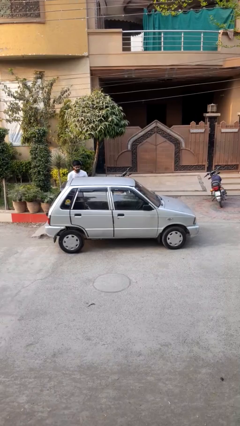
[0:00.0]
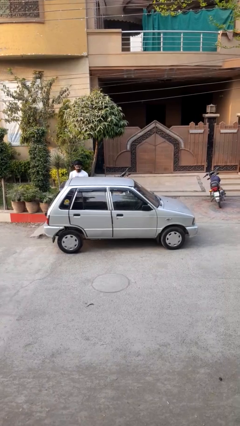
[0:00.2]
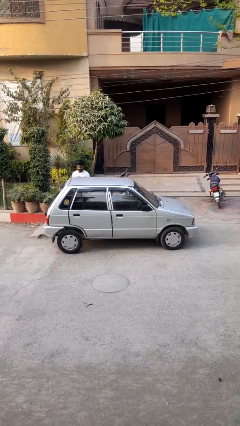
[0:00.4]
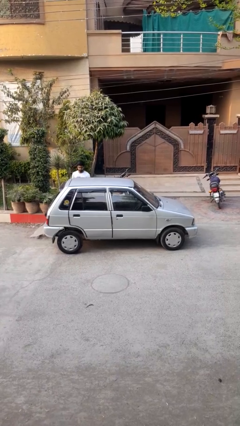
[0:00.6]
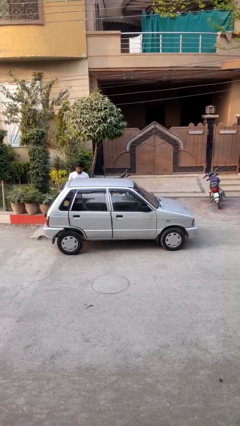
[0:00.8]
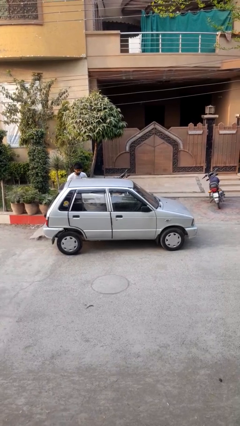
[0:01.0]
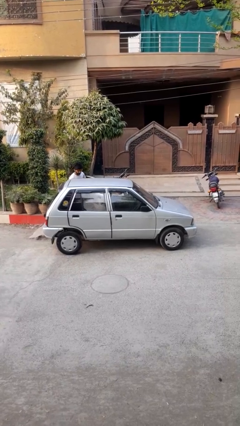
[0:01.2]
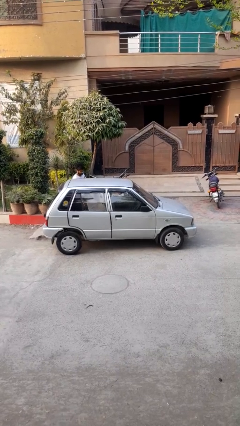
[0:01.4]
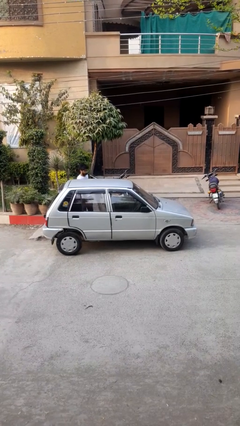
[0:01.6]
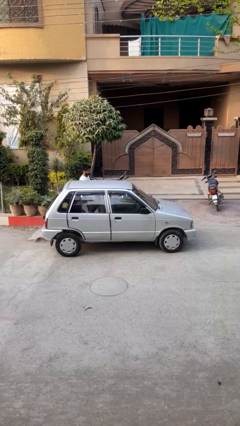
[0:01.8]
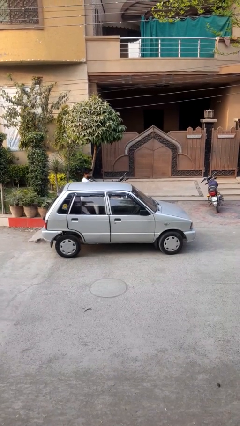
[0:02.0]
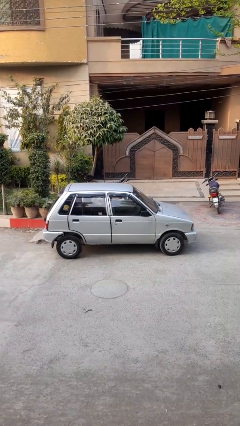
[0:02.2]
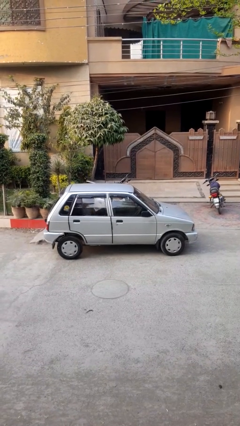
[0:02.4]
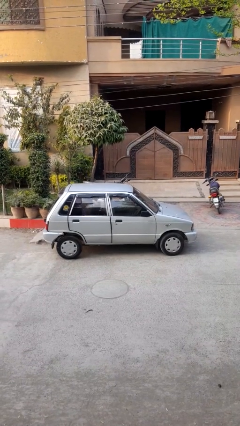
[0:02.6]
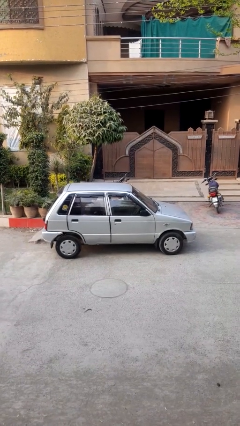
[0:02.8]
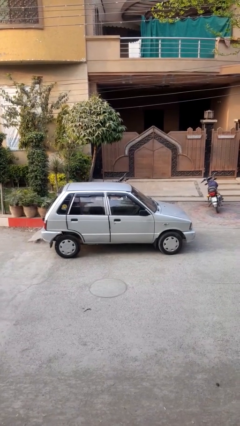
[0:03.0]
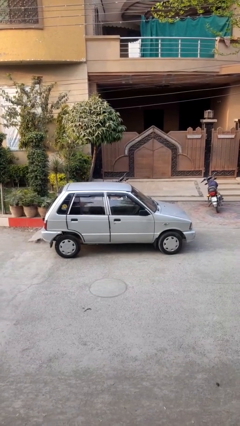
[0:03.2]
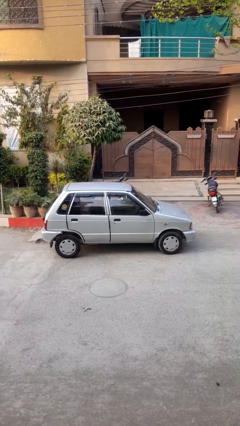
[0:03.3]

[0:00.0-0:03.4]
car picks up person

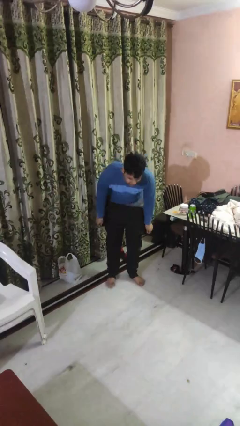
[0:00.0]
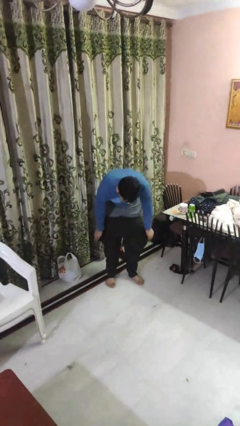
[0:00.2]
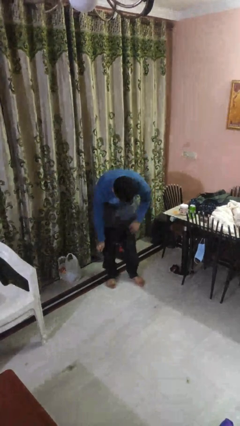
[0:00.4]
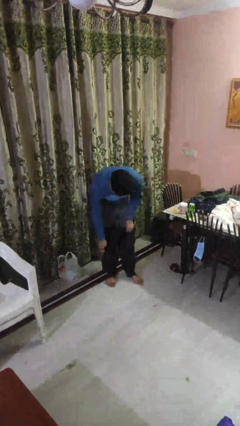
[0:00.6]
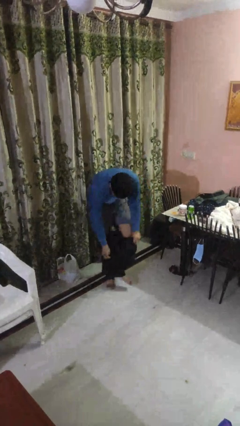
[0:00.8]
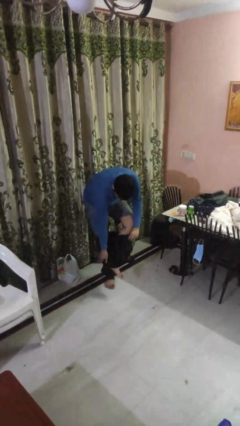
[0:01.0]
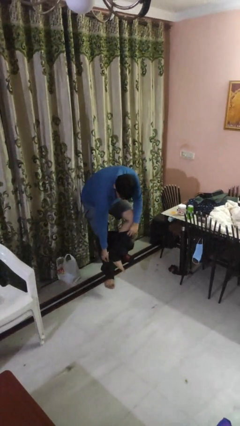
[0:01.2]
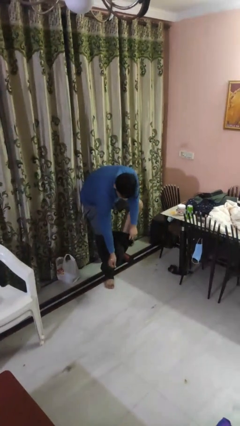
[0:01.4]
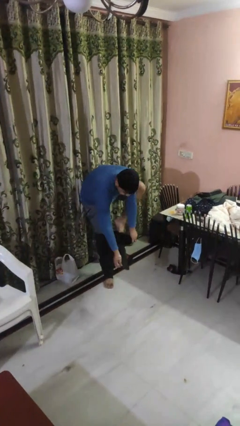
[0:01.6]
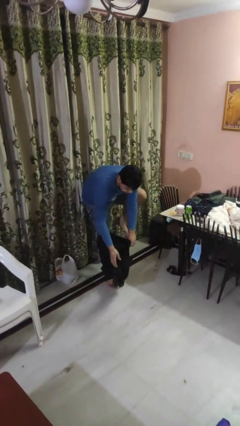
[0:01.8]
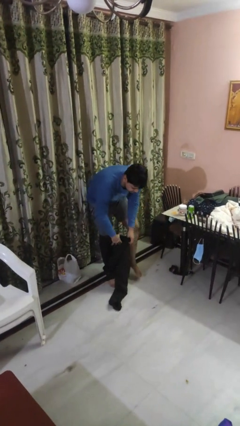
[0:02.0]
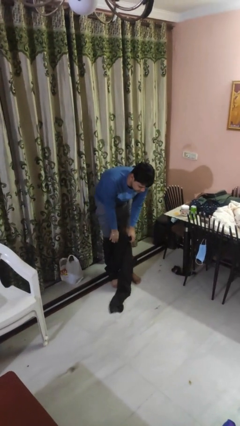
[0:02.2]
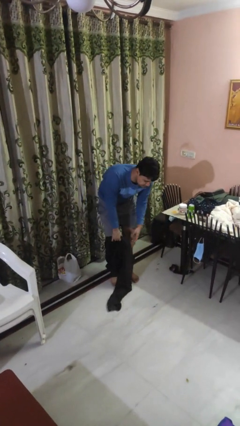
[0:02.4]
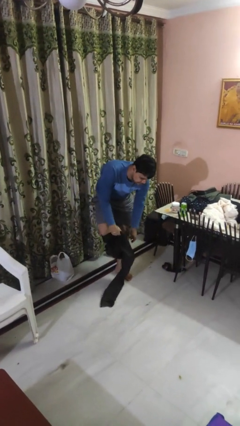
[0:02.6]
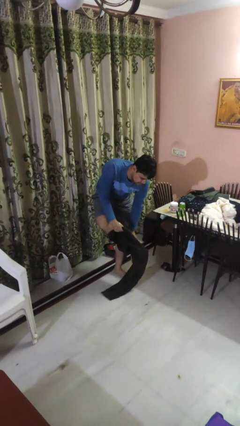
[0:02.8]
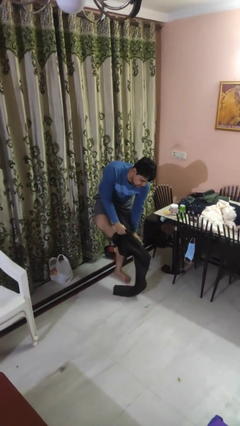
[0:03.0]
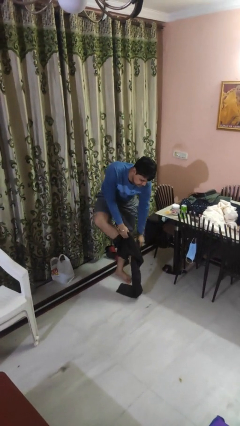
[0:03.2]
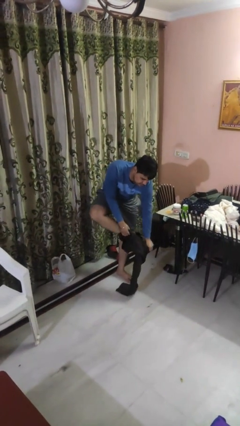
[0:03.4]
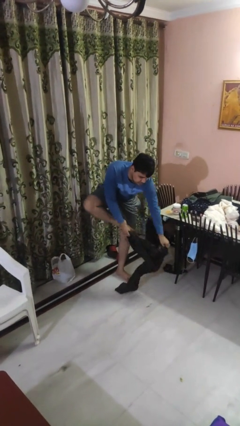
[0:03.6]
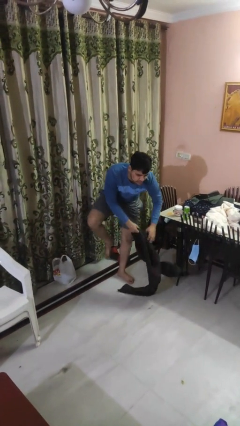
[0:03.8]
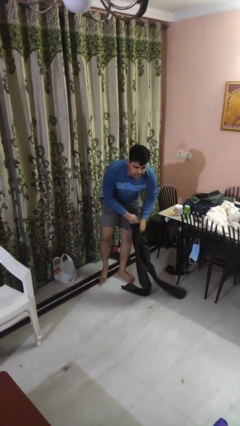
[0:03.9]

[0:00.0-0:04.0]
person takes off pants

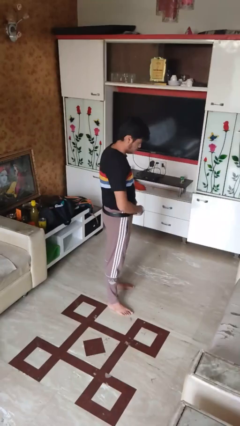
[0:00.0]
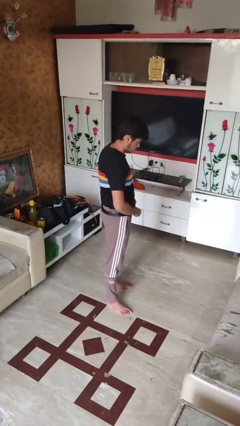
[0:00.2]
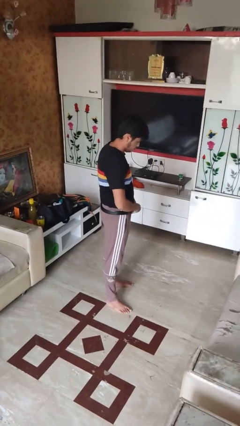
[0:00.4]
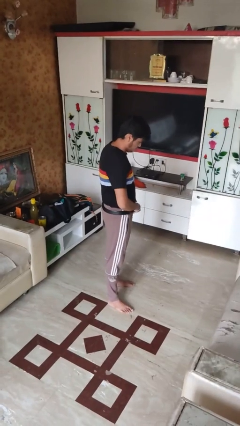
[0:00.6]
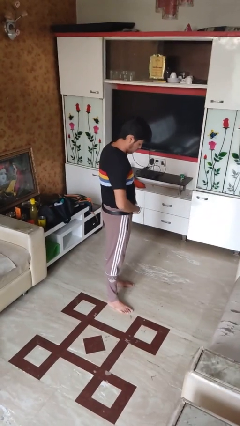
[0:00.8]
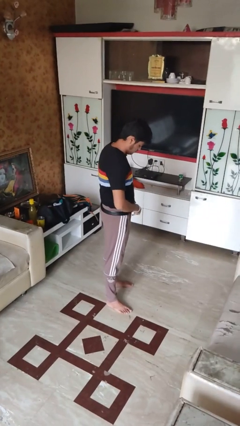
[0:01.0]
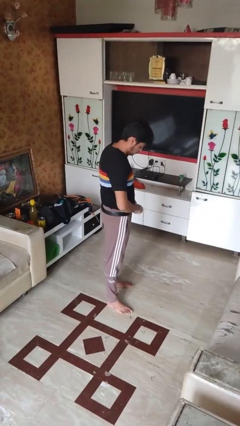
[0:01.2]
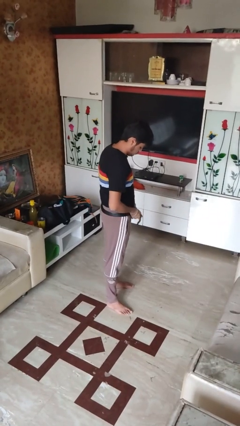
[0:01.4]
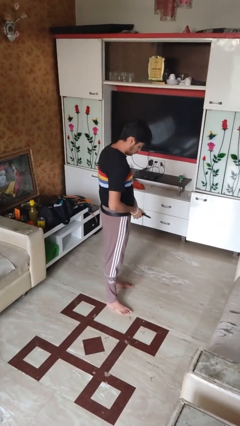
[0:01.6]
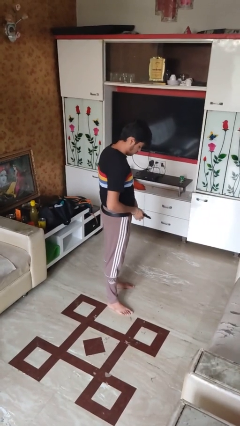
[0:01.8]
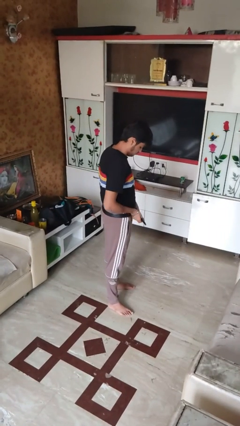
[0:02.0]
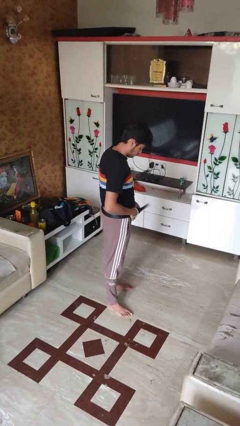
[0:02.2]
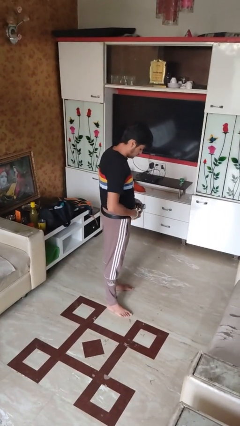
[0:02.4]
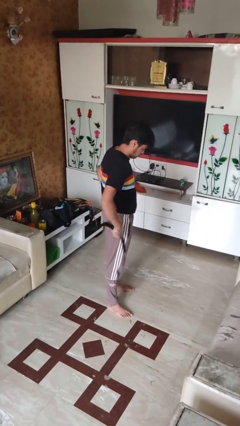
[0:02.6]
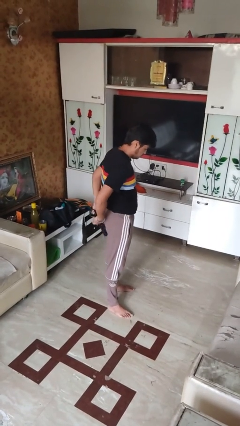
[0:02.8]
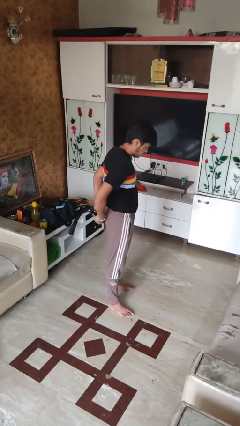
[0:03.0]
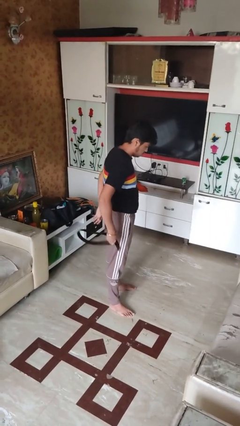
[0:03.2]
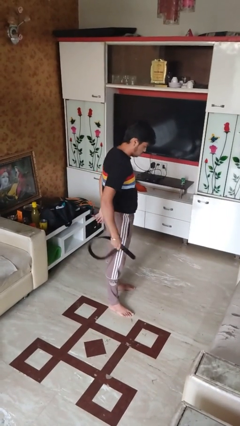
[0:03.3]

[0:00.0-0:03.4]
person takes off belt

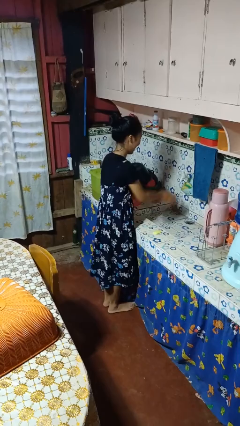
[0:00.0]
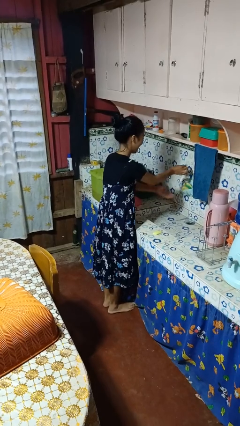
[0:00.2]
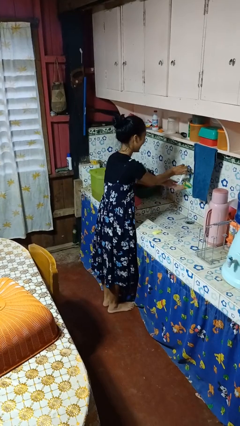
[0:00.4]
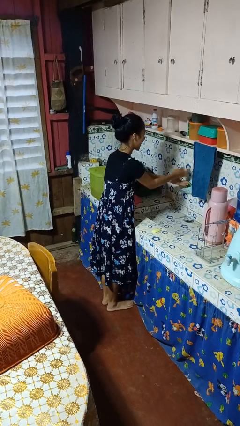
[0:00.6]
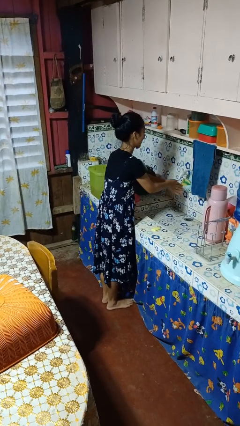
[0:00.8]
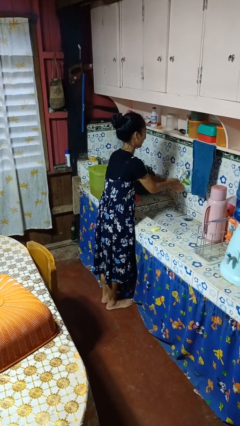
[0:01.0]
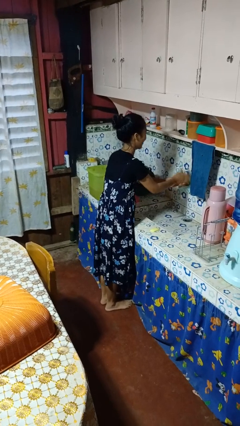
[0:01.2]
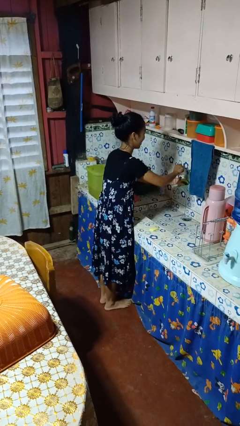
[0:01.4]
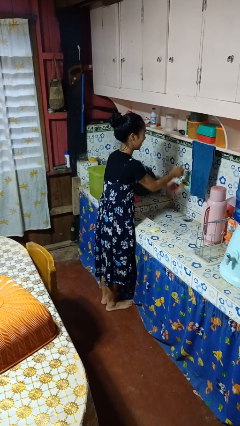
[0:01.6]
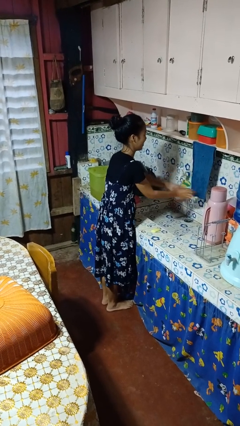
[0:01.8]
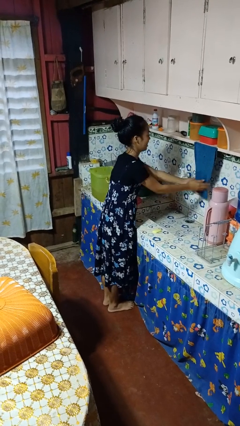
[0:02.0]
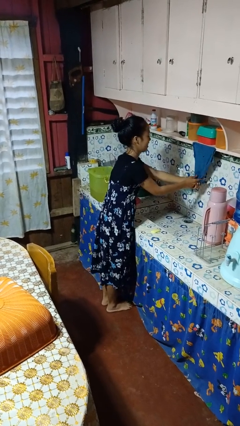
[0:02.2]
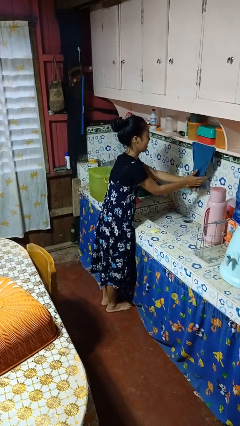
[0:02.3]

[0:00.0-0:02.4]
person washes hands

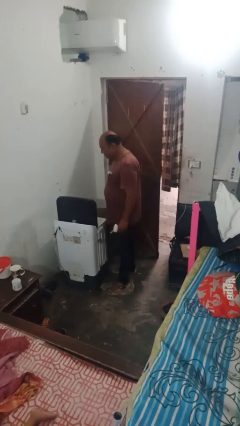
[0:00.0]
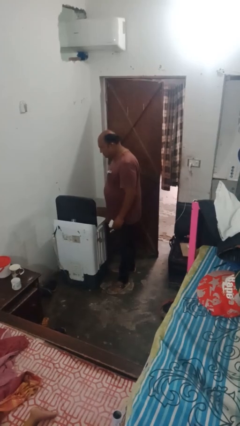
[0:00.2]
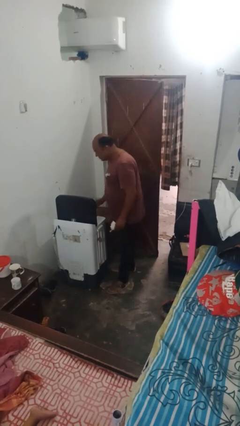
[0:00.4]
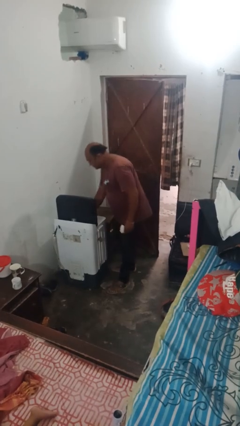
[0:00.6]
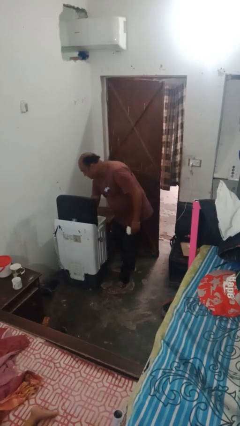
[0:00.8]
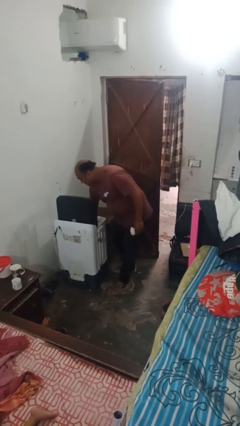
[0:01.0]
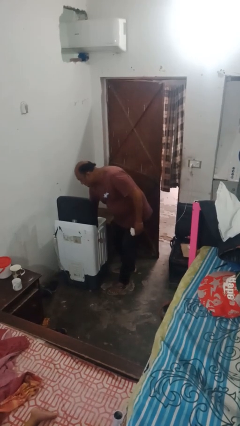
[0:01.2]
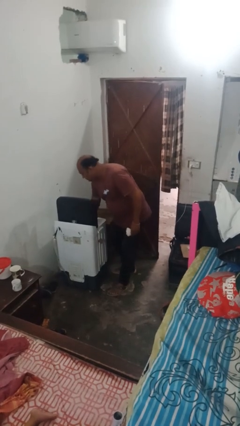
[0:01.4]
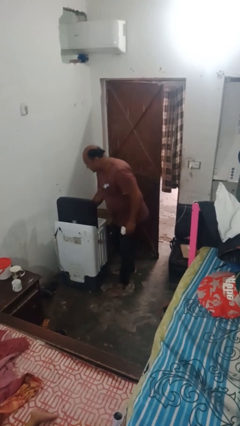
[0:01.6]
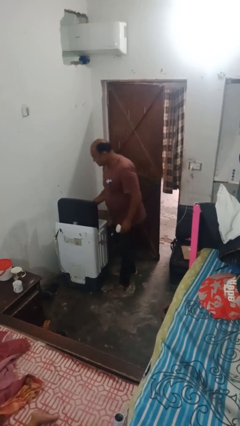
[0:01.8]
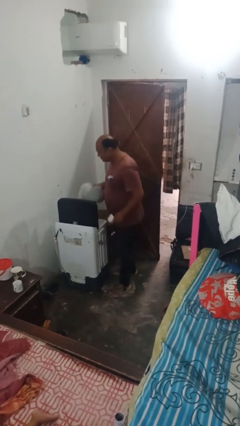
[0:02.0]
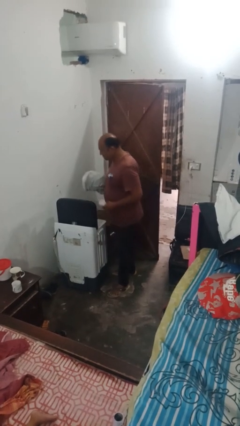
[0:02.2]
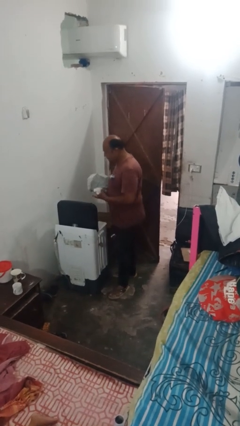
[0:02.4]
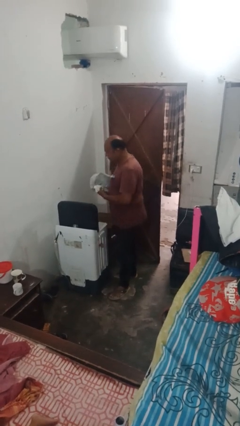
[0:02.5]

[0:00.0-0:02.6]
person unloads dryer

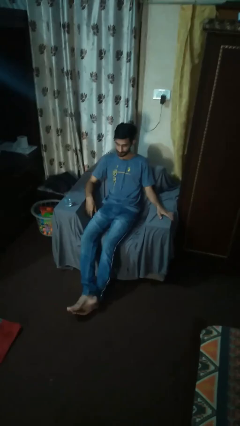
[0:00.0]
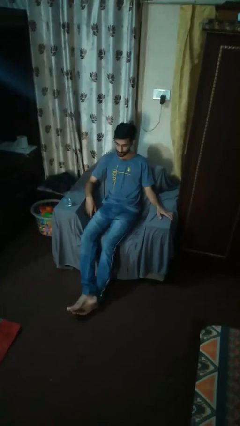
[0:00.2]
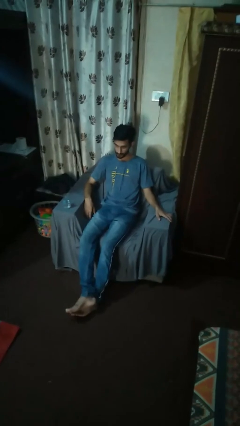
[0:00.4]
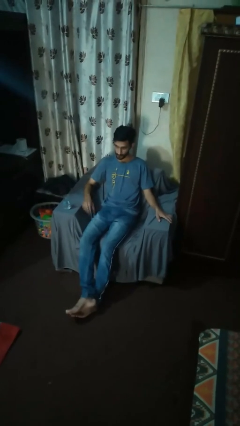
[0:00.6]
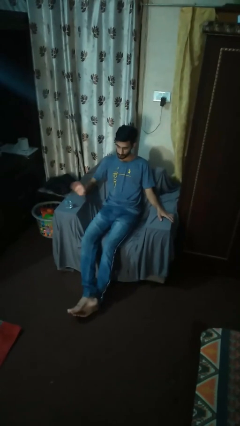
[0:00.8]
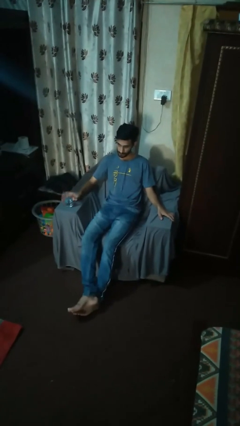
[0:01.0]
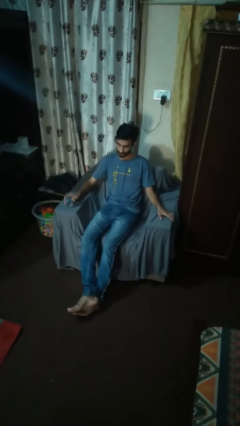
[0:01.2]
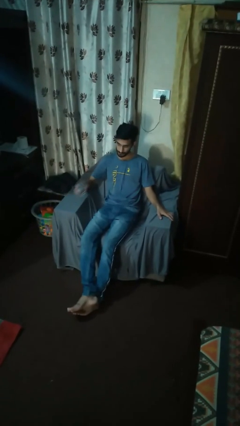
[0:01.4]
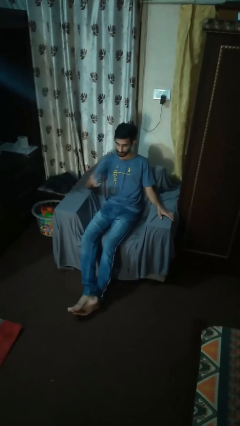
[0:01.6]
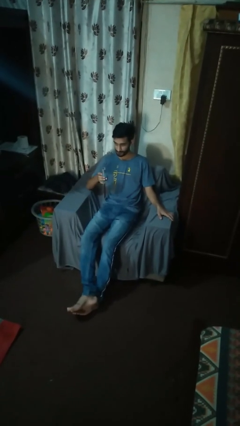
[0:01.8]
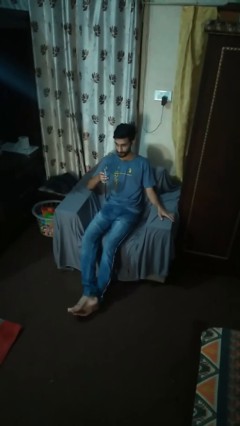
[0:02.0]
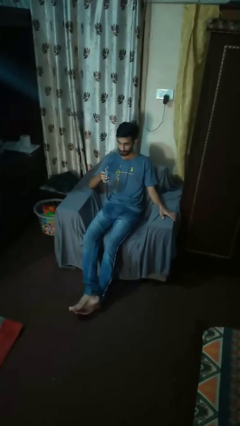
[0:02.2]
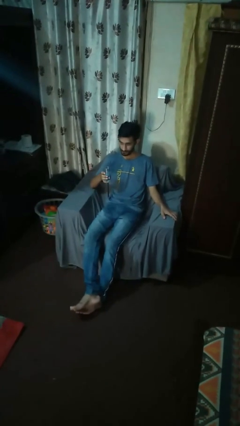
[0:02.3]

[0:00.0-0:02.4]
person picks up object from table
